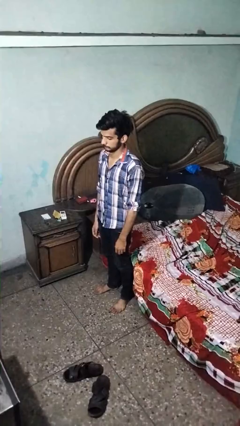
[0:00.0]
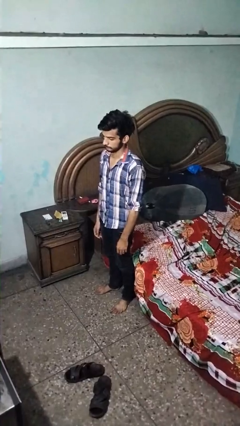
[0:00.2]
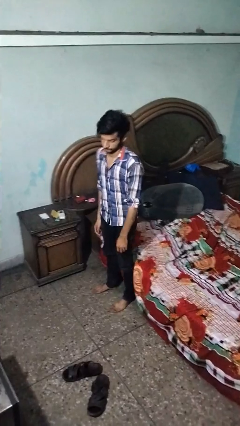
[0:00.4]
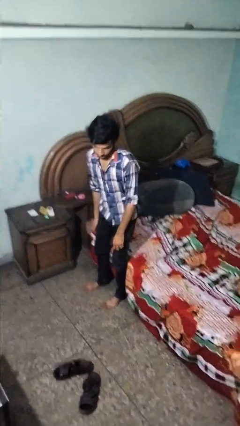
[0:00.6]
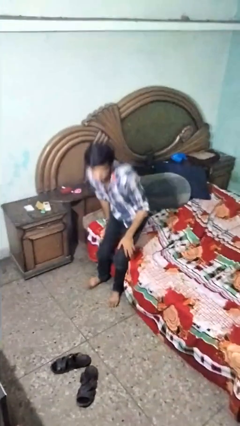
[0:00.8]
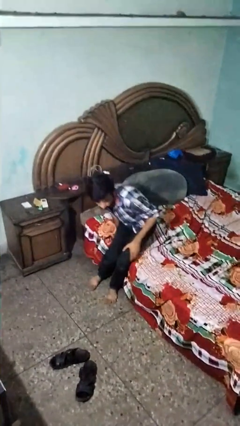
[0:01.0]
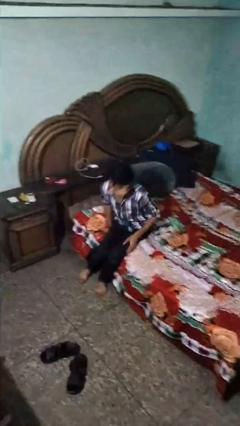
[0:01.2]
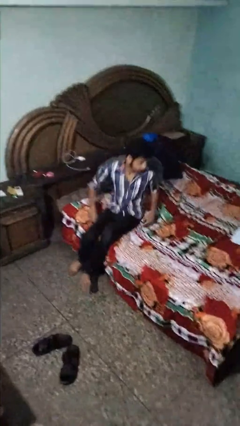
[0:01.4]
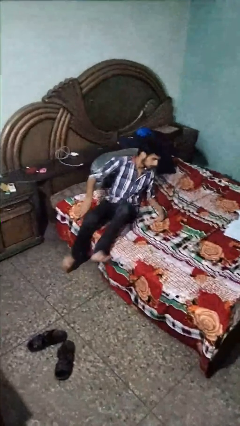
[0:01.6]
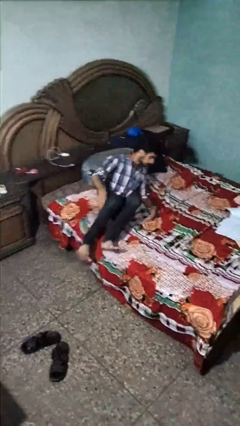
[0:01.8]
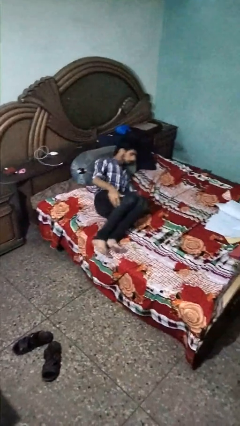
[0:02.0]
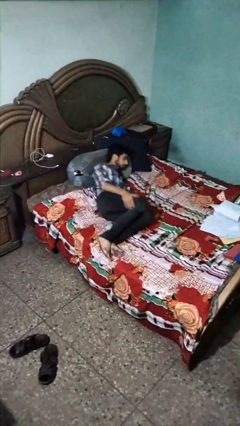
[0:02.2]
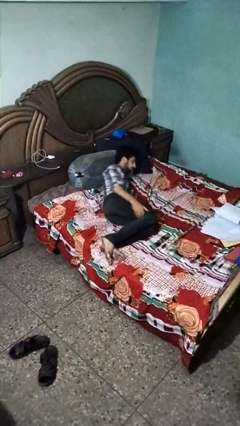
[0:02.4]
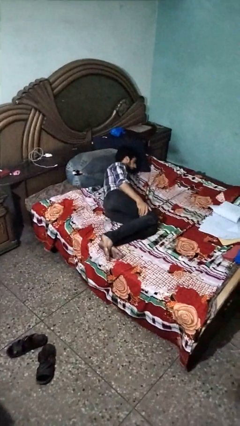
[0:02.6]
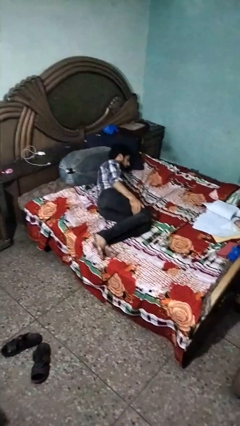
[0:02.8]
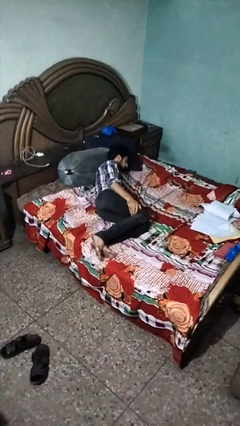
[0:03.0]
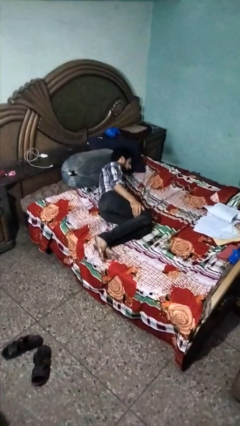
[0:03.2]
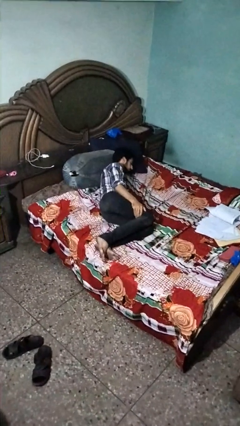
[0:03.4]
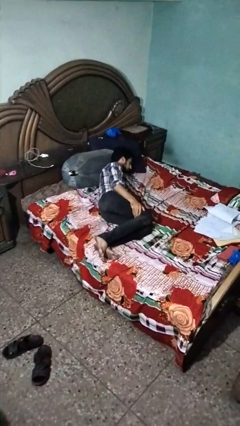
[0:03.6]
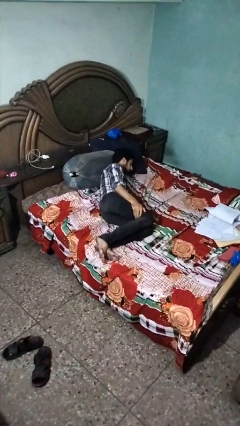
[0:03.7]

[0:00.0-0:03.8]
person lies down on bed

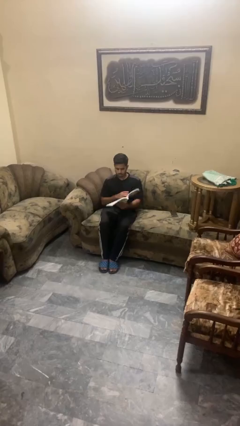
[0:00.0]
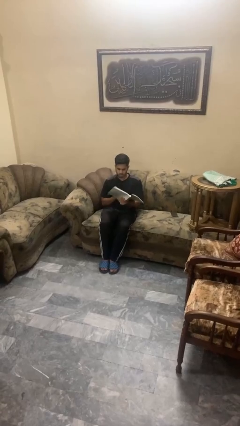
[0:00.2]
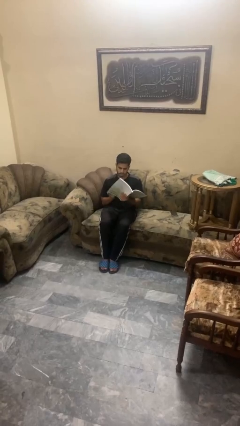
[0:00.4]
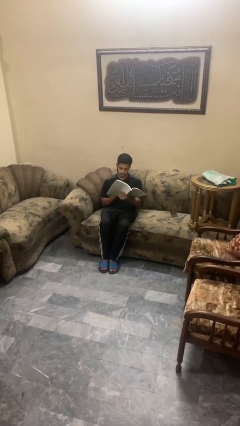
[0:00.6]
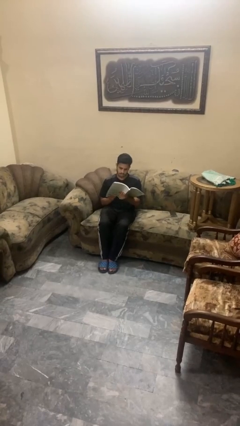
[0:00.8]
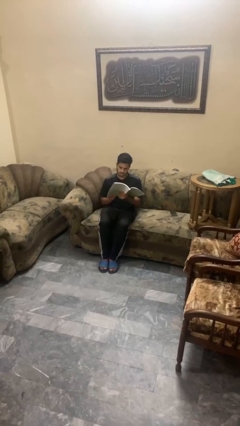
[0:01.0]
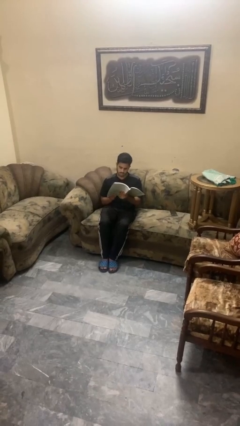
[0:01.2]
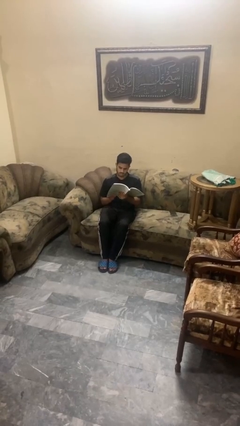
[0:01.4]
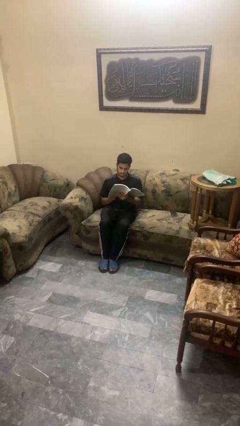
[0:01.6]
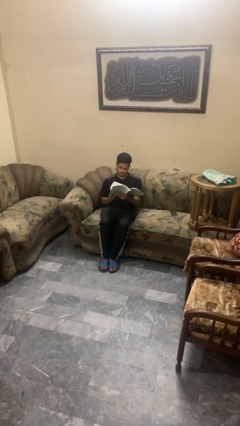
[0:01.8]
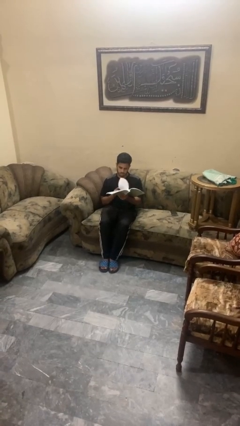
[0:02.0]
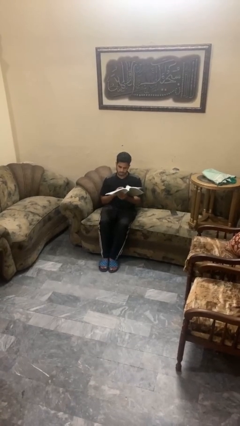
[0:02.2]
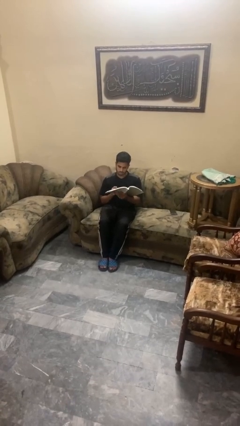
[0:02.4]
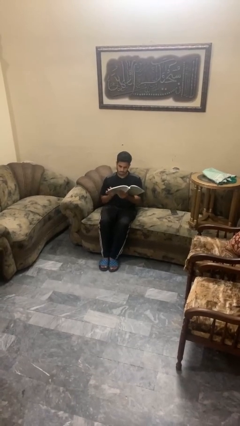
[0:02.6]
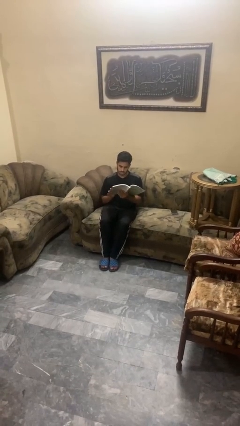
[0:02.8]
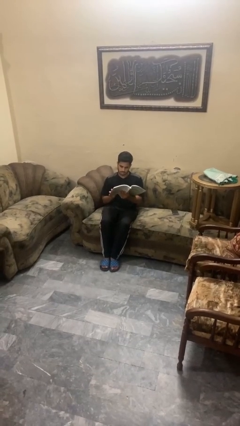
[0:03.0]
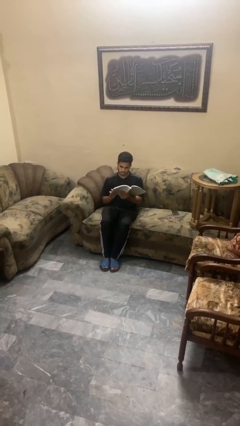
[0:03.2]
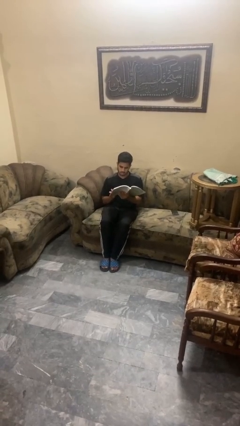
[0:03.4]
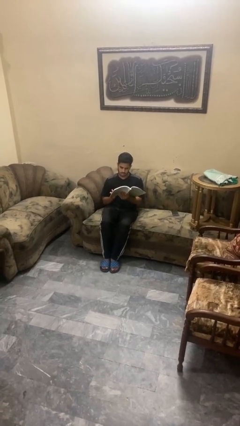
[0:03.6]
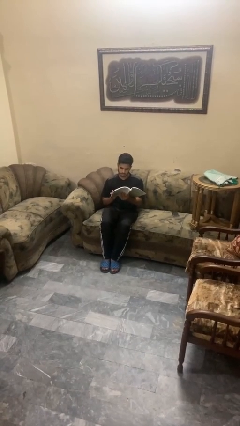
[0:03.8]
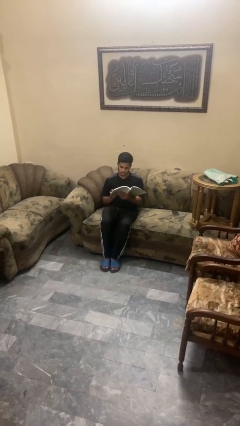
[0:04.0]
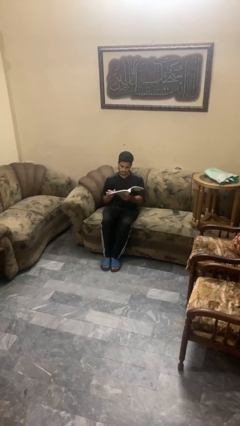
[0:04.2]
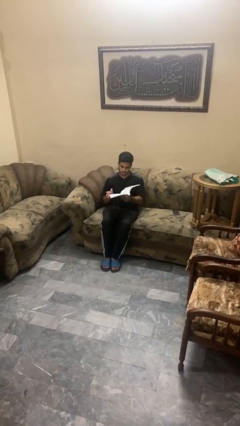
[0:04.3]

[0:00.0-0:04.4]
person reads book

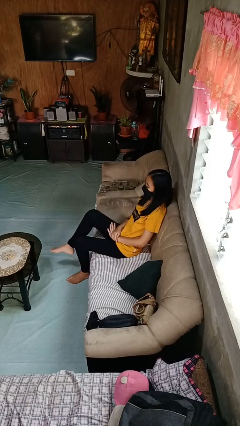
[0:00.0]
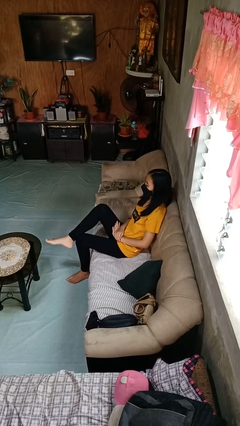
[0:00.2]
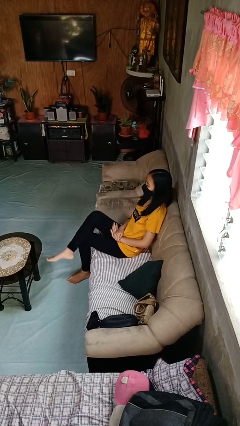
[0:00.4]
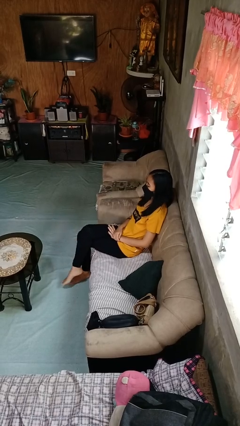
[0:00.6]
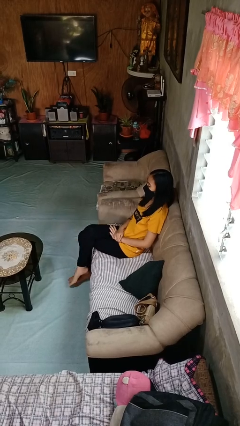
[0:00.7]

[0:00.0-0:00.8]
person crosses legs

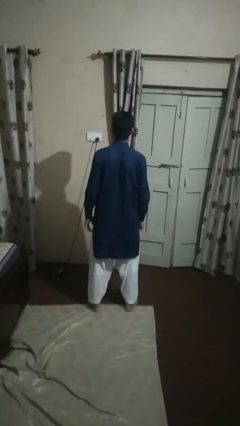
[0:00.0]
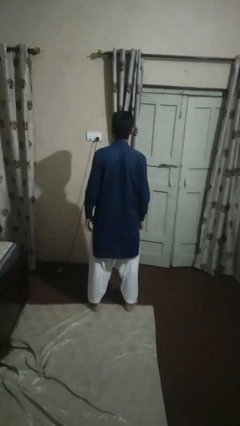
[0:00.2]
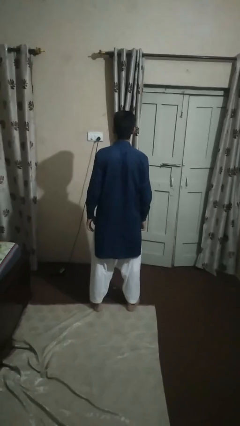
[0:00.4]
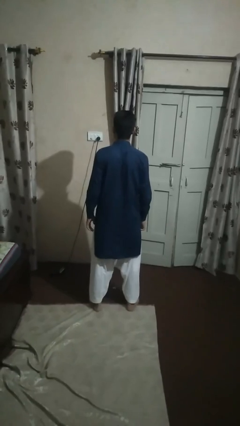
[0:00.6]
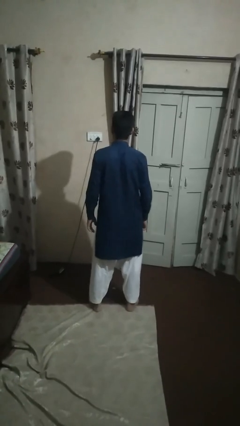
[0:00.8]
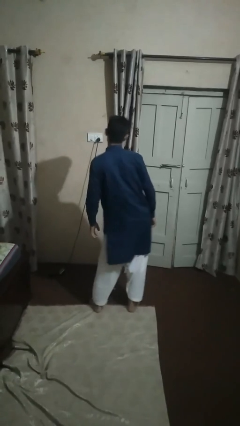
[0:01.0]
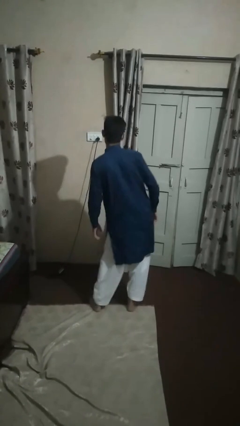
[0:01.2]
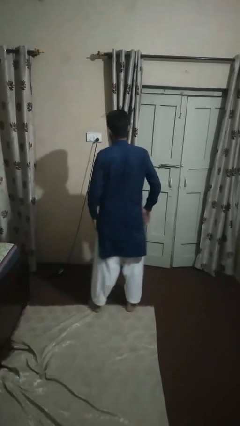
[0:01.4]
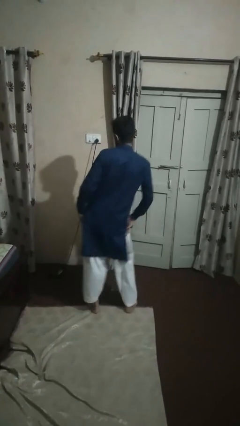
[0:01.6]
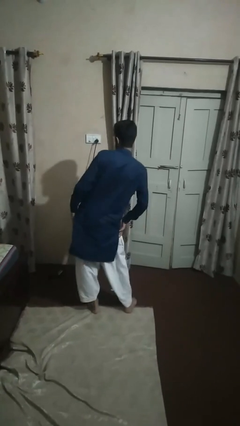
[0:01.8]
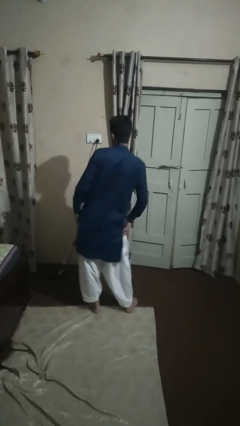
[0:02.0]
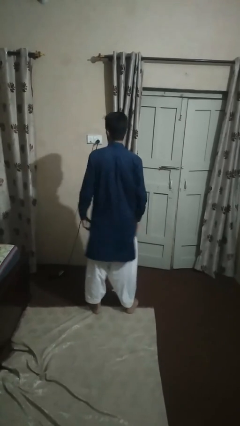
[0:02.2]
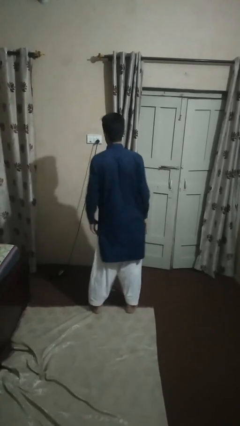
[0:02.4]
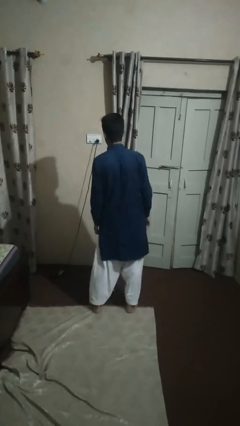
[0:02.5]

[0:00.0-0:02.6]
person wiggles hips

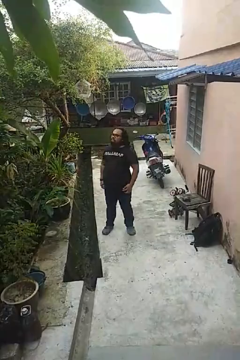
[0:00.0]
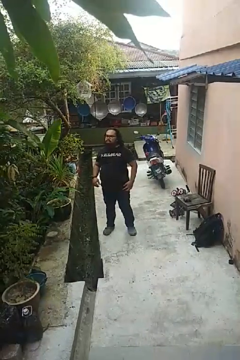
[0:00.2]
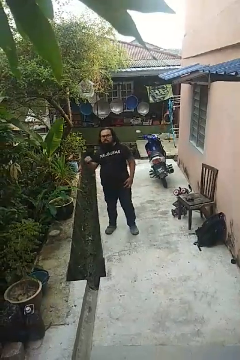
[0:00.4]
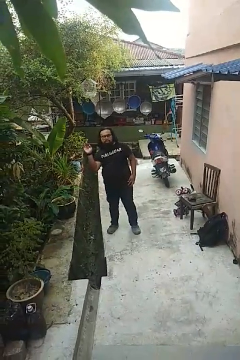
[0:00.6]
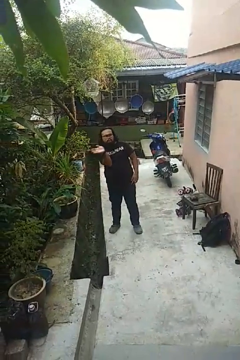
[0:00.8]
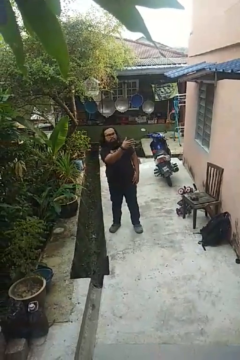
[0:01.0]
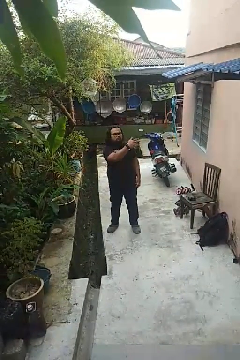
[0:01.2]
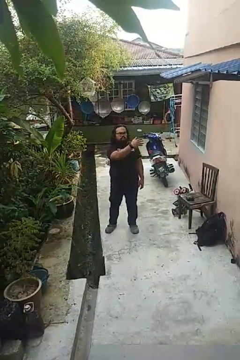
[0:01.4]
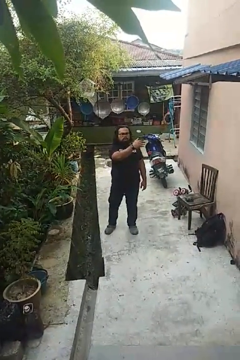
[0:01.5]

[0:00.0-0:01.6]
person gestures swipe left

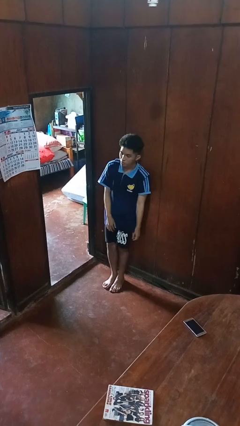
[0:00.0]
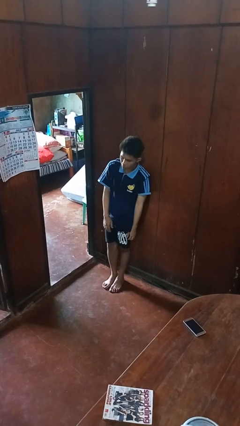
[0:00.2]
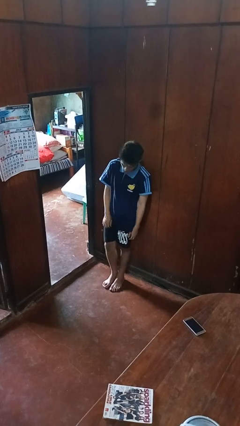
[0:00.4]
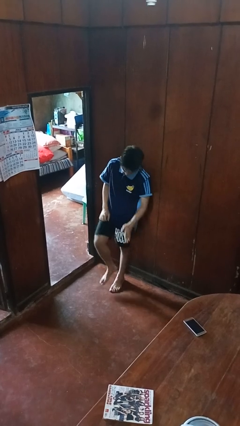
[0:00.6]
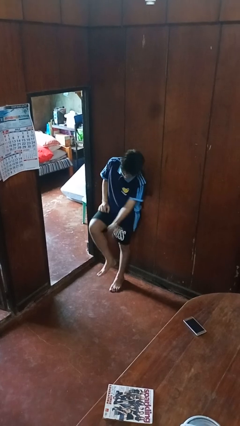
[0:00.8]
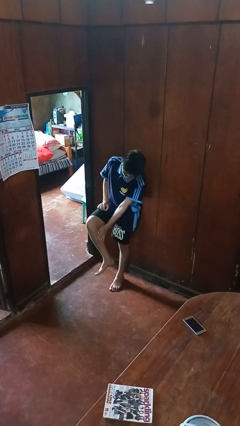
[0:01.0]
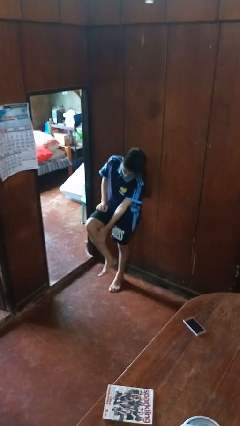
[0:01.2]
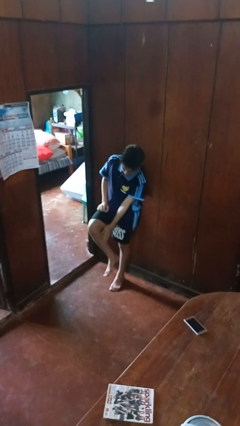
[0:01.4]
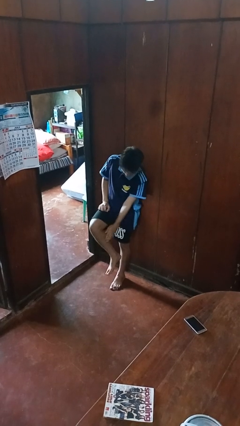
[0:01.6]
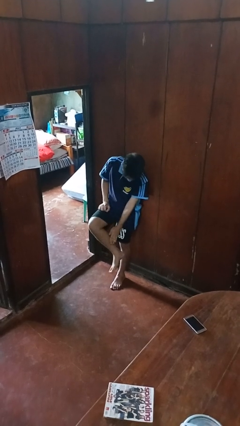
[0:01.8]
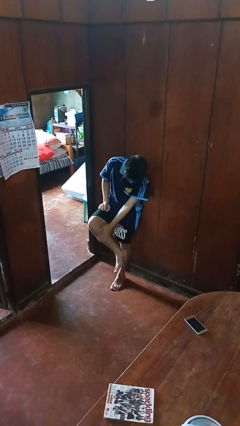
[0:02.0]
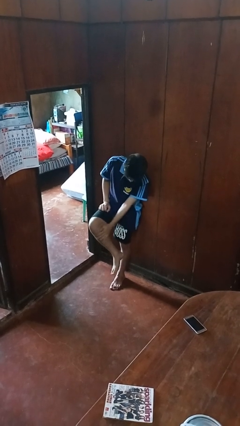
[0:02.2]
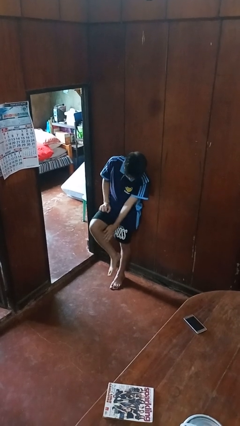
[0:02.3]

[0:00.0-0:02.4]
person swats bug

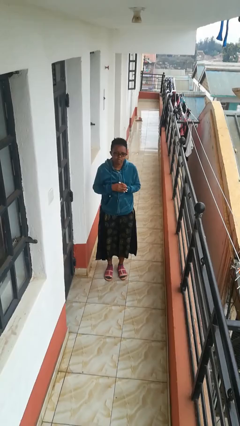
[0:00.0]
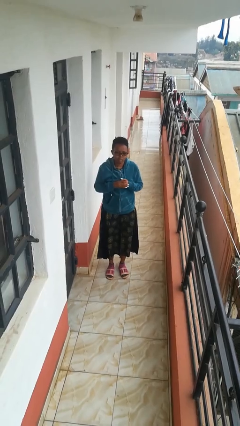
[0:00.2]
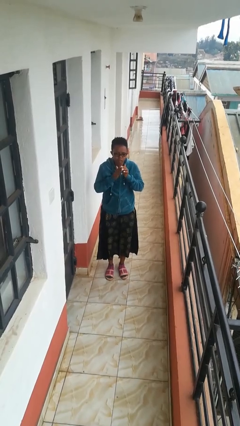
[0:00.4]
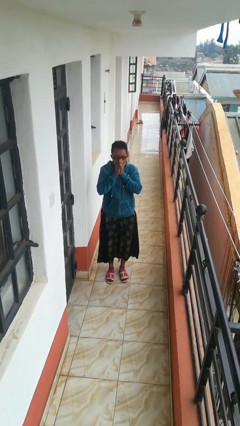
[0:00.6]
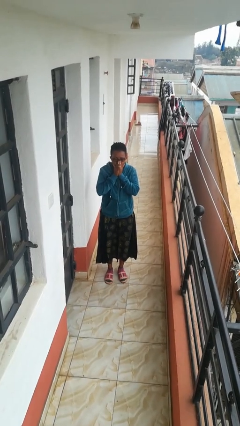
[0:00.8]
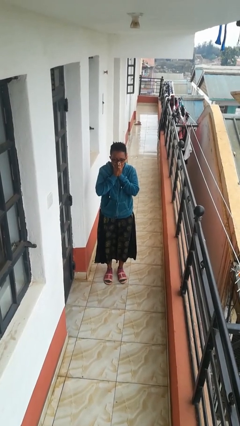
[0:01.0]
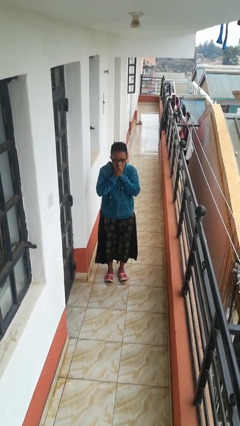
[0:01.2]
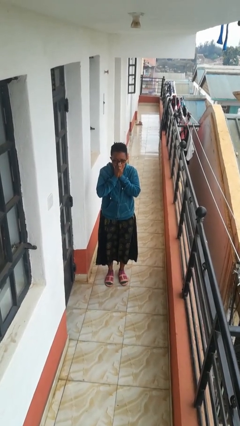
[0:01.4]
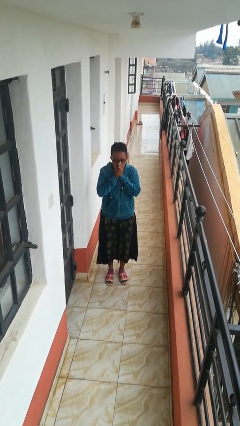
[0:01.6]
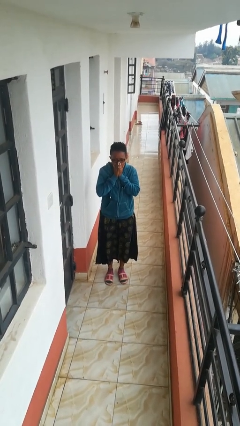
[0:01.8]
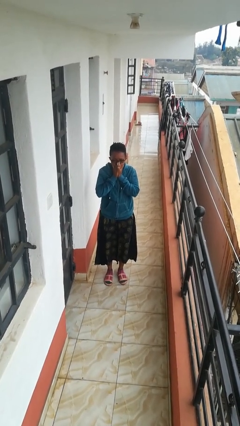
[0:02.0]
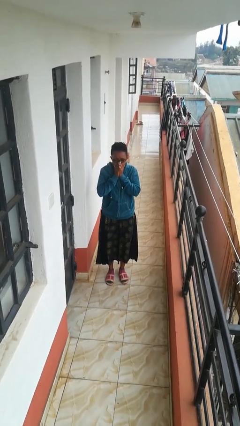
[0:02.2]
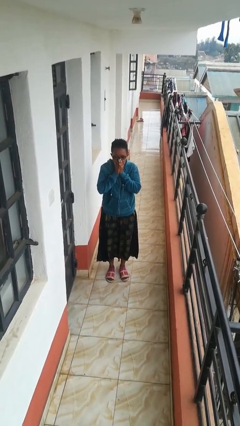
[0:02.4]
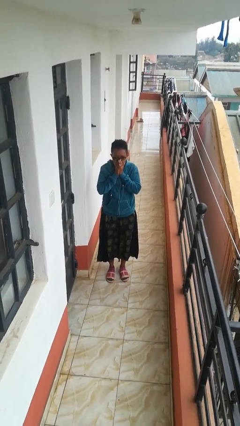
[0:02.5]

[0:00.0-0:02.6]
person blows into hands
